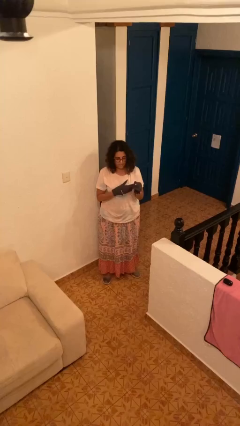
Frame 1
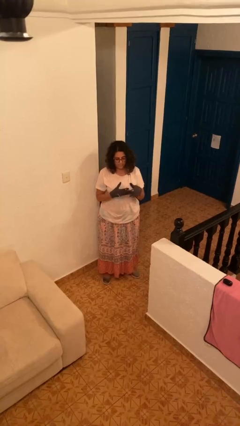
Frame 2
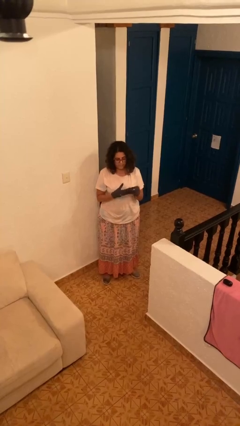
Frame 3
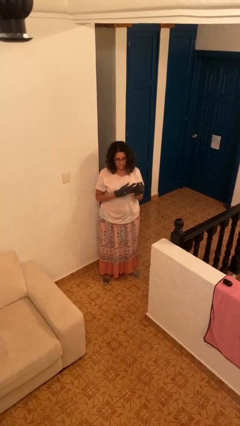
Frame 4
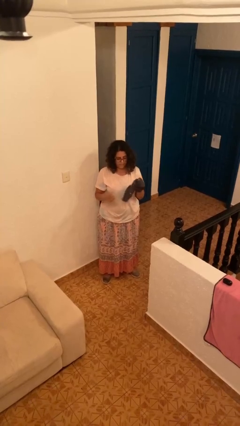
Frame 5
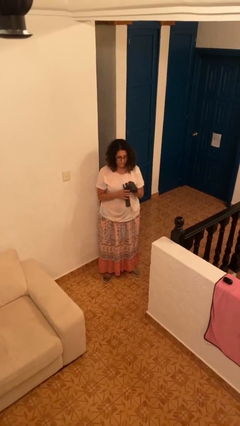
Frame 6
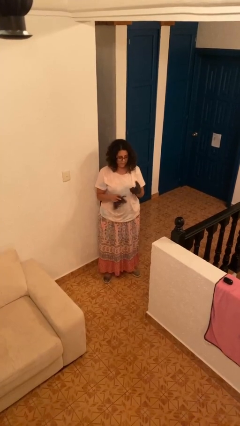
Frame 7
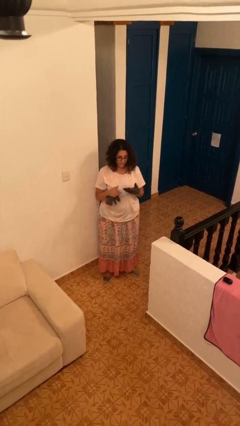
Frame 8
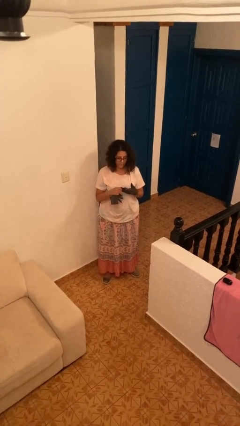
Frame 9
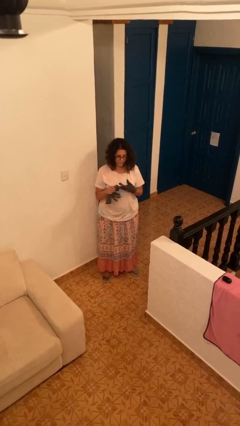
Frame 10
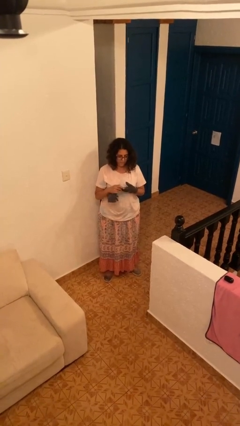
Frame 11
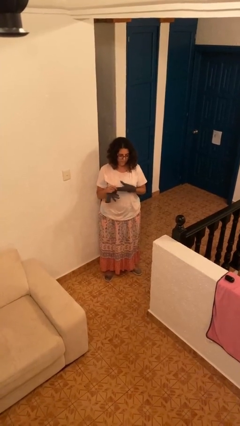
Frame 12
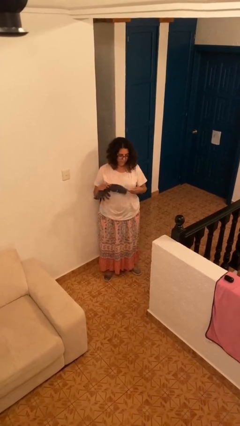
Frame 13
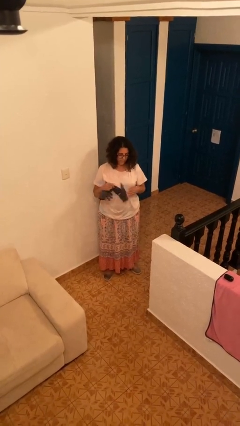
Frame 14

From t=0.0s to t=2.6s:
person takes off gloves

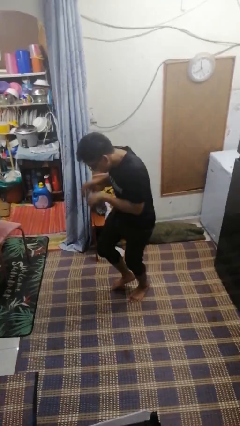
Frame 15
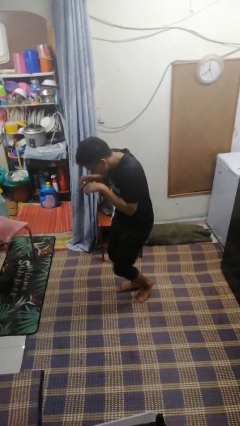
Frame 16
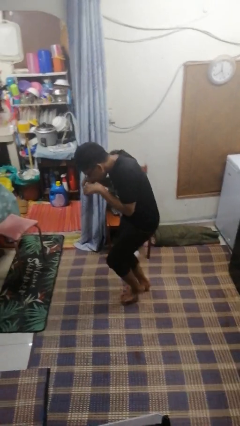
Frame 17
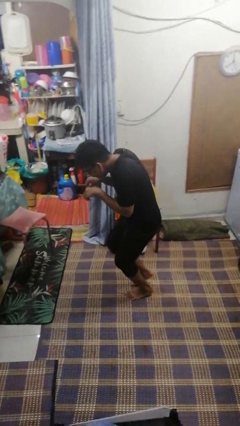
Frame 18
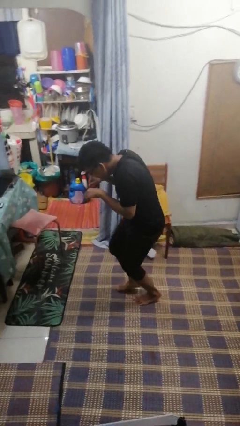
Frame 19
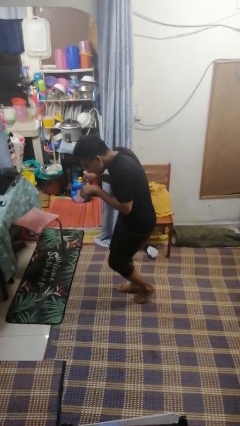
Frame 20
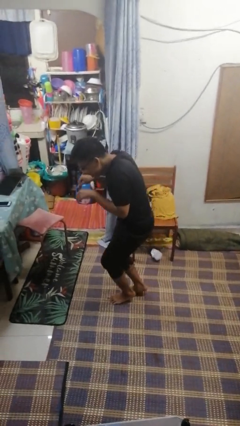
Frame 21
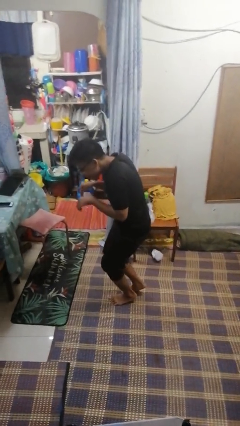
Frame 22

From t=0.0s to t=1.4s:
person walks tiptoe

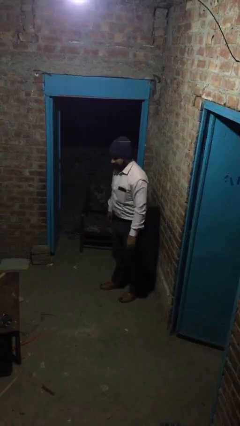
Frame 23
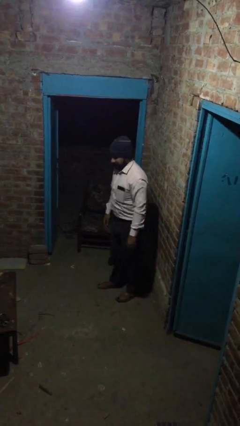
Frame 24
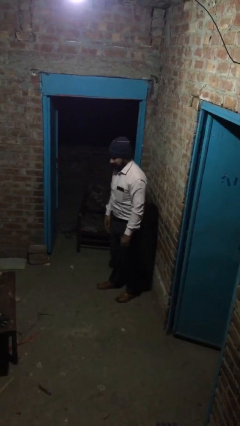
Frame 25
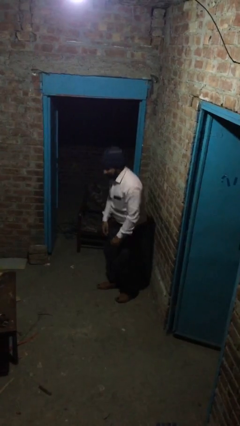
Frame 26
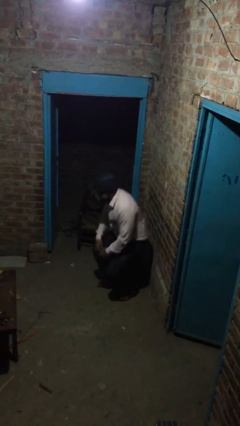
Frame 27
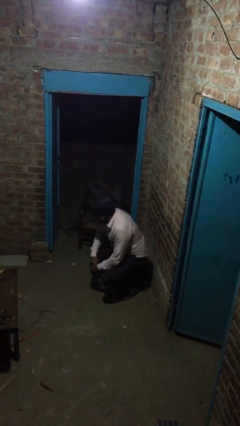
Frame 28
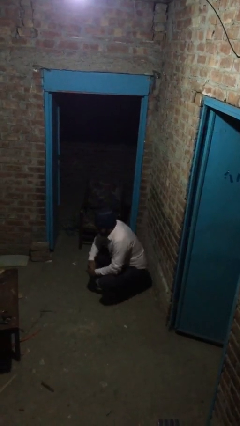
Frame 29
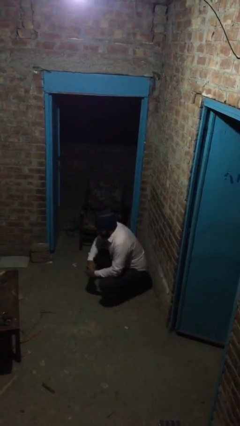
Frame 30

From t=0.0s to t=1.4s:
person sits down

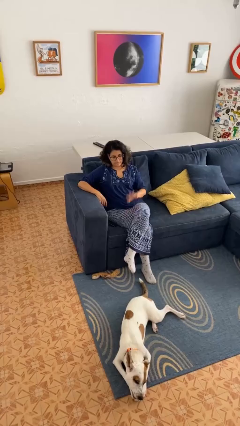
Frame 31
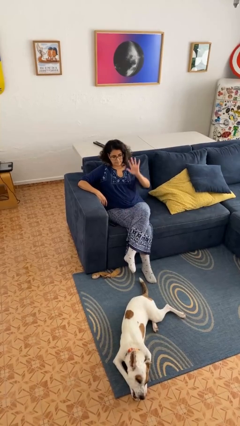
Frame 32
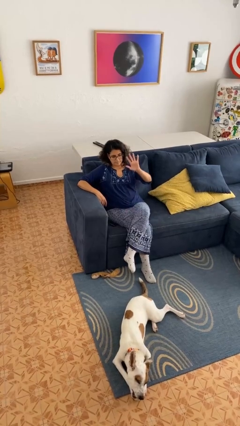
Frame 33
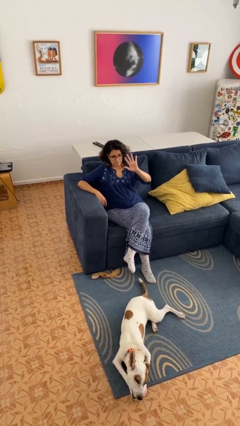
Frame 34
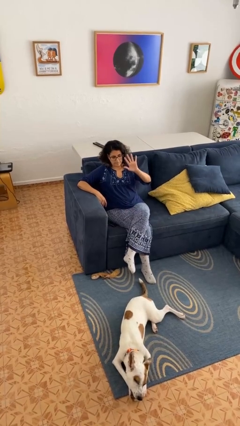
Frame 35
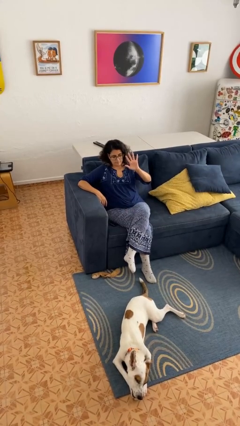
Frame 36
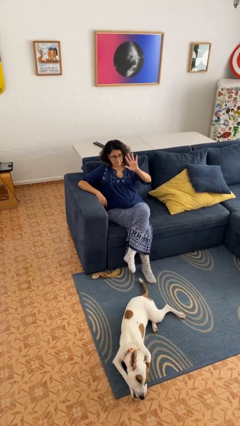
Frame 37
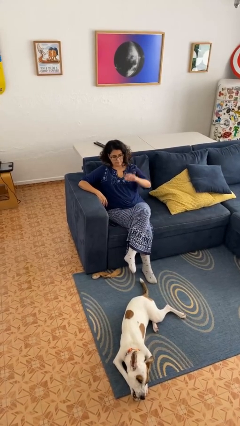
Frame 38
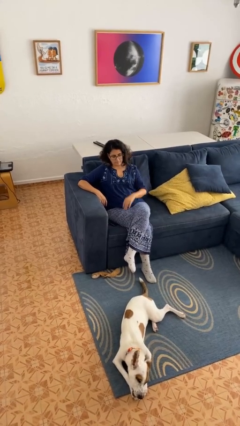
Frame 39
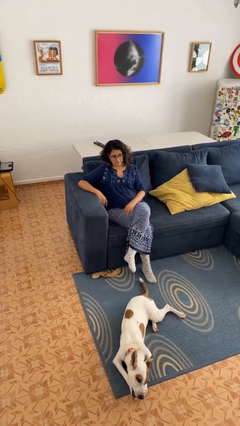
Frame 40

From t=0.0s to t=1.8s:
person gestures number five

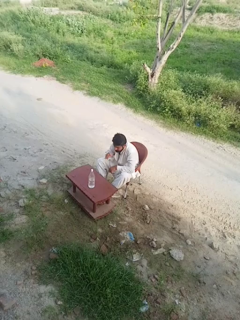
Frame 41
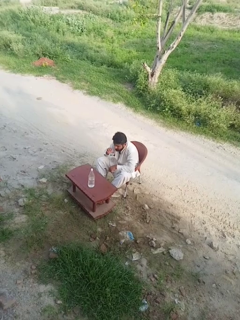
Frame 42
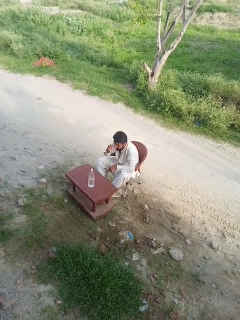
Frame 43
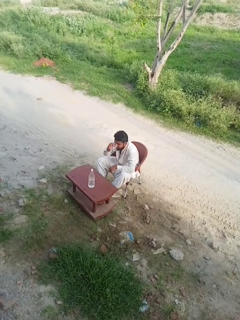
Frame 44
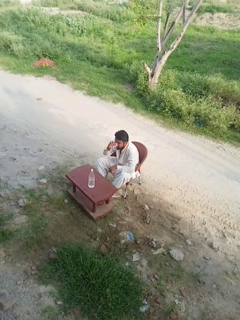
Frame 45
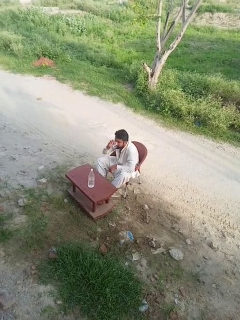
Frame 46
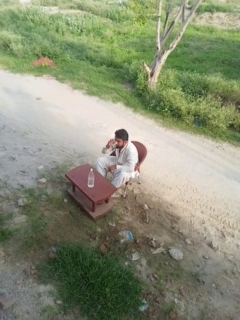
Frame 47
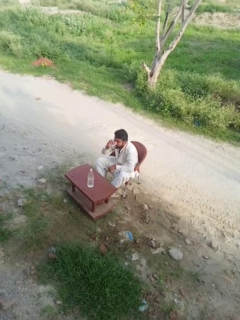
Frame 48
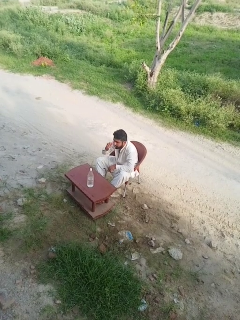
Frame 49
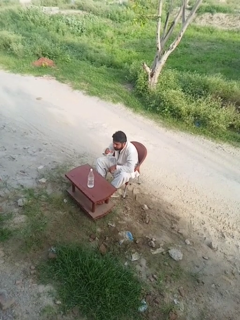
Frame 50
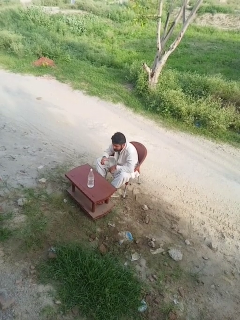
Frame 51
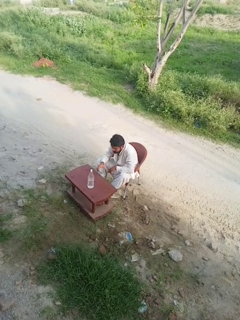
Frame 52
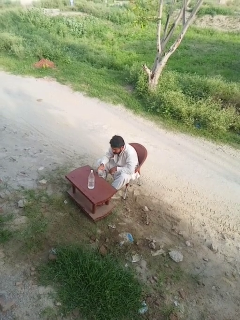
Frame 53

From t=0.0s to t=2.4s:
person drinks from mug

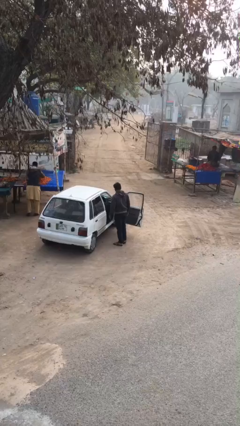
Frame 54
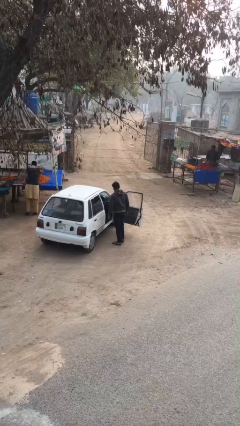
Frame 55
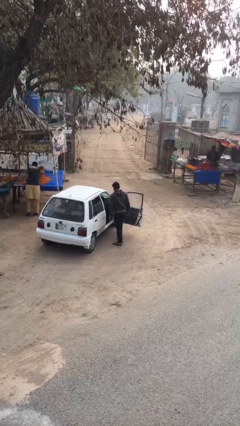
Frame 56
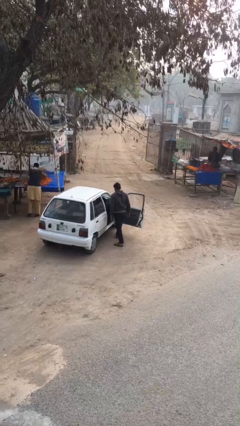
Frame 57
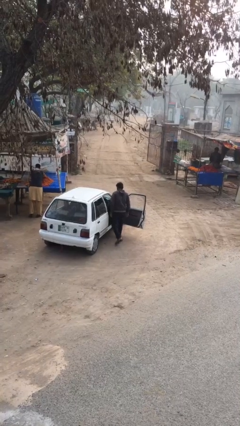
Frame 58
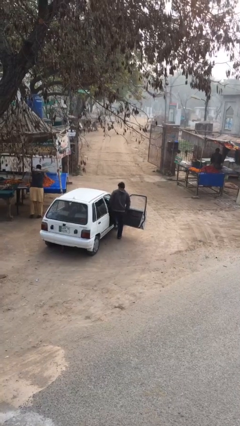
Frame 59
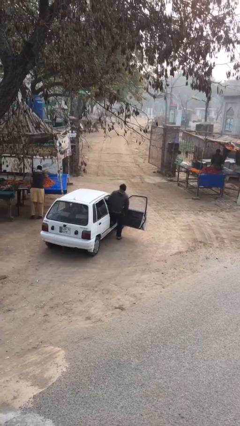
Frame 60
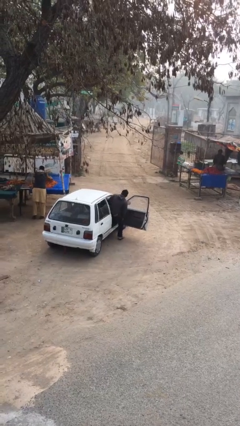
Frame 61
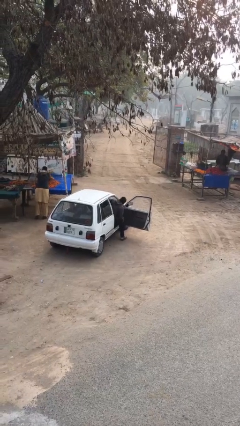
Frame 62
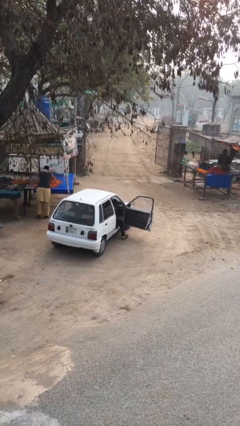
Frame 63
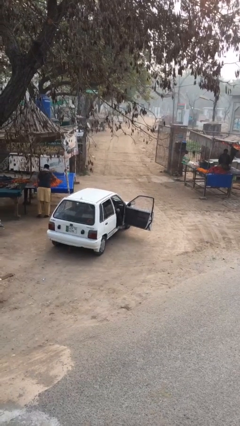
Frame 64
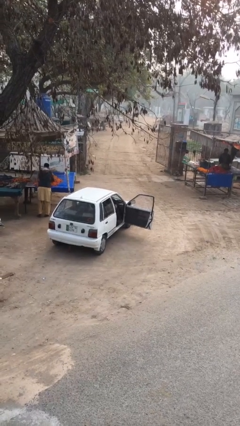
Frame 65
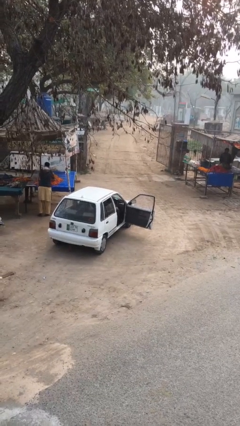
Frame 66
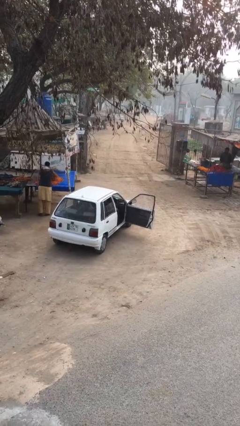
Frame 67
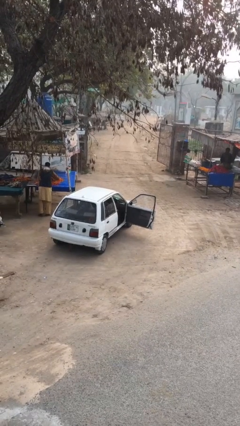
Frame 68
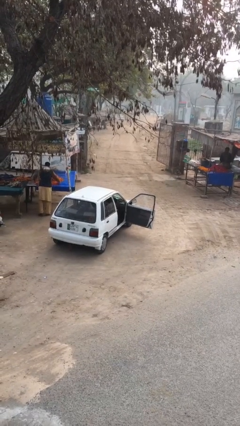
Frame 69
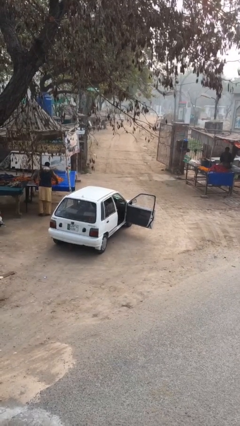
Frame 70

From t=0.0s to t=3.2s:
person enters car

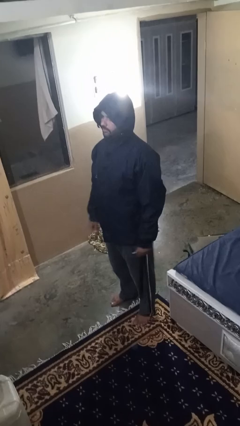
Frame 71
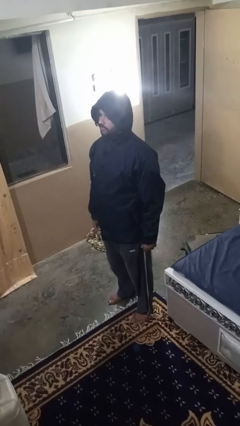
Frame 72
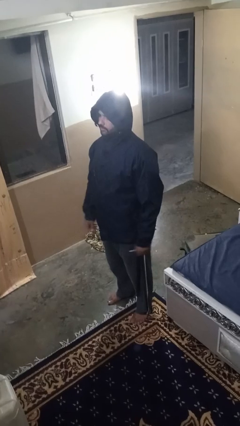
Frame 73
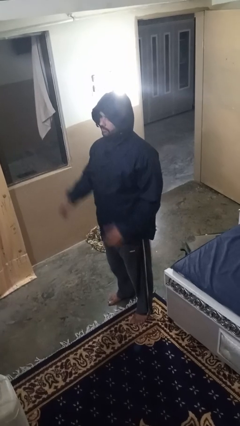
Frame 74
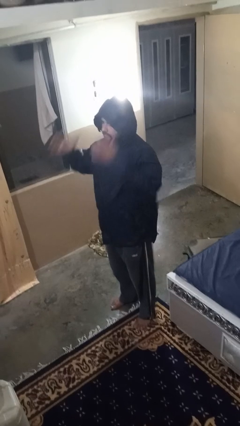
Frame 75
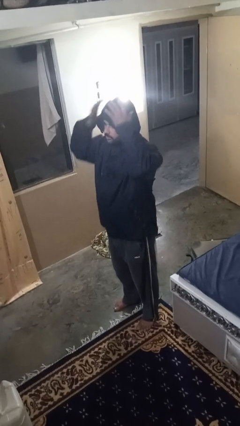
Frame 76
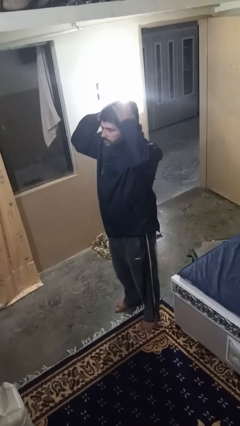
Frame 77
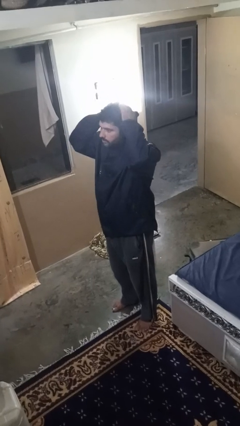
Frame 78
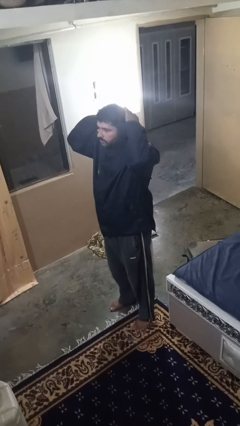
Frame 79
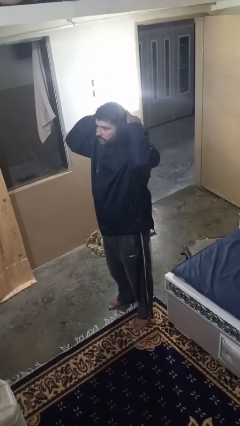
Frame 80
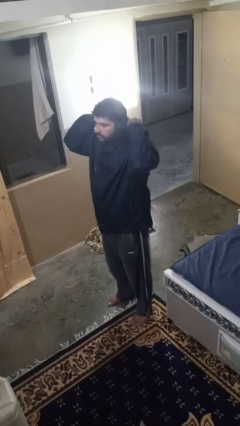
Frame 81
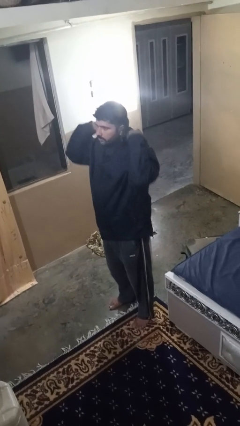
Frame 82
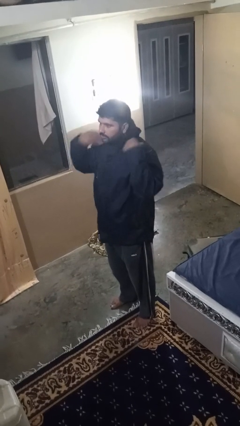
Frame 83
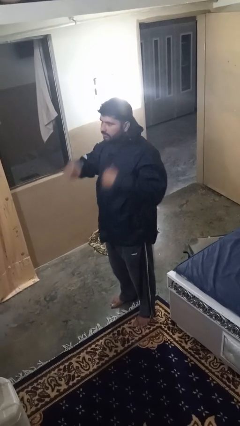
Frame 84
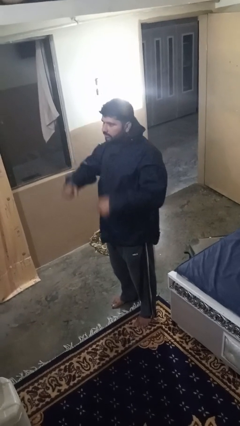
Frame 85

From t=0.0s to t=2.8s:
person takes off hoodie

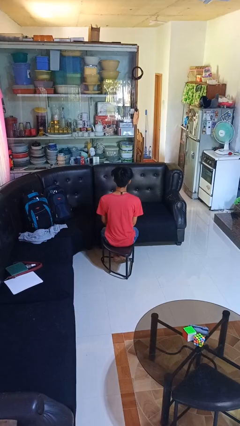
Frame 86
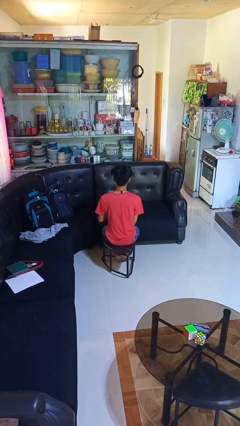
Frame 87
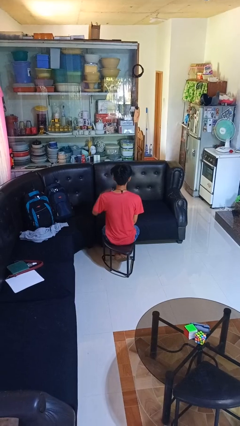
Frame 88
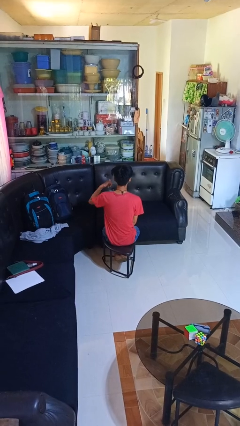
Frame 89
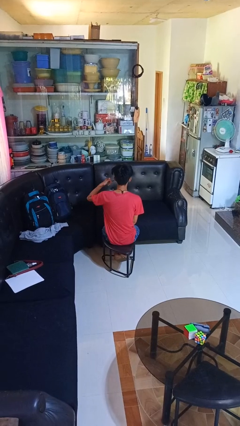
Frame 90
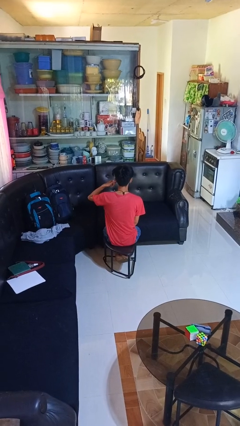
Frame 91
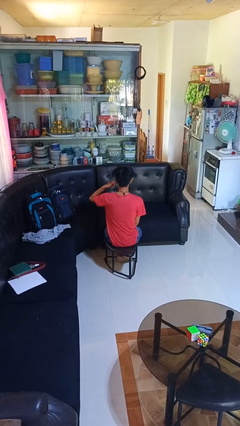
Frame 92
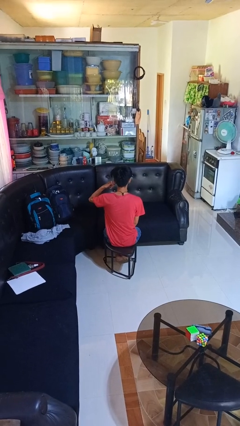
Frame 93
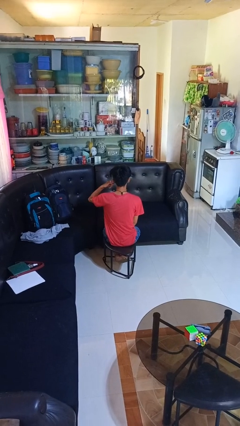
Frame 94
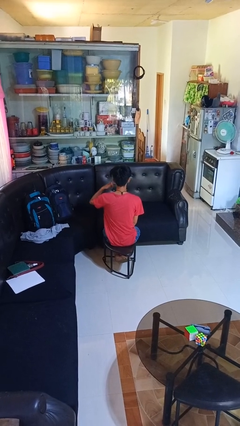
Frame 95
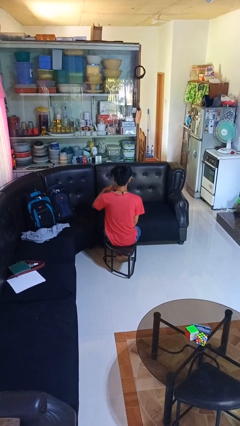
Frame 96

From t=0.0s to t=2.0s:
person gestures call me
